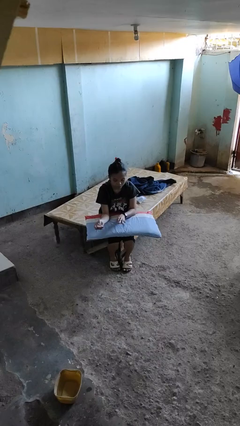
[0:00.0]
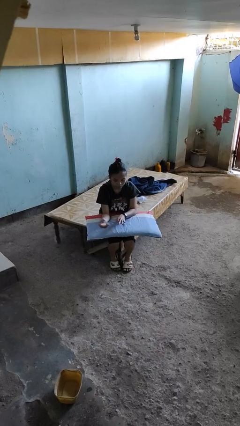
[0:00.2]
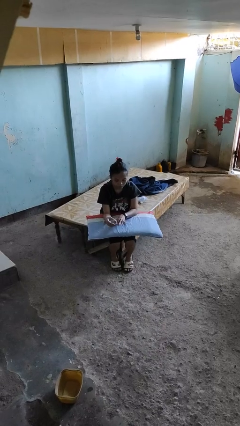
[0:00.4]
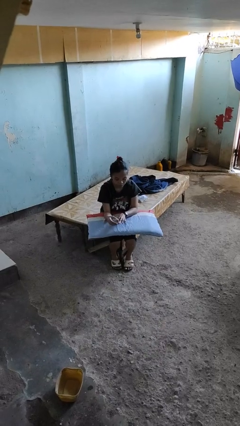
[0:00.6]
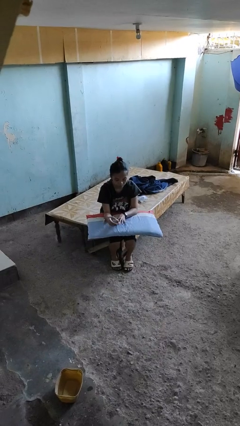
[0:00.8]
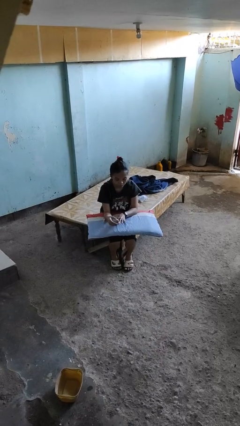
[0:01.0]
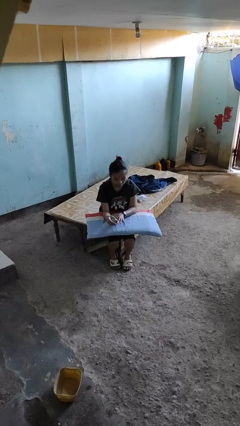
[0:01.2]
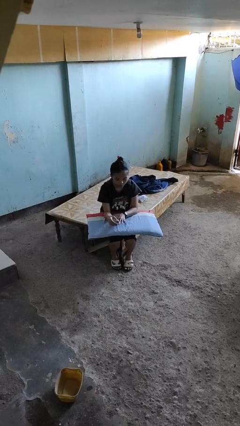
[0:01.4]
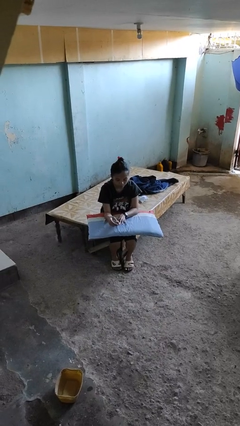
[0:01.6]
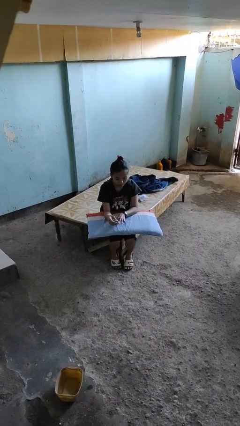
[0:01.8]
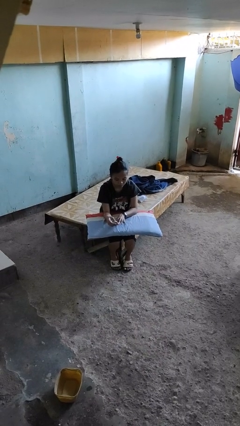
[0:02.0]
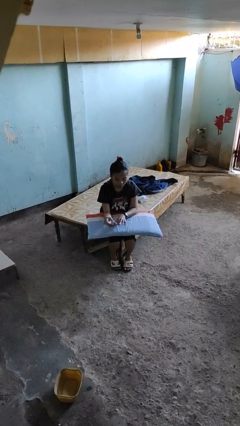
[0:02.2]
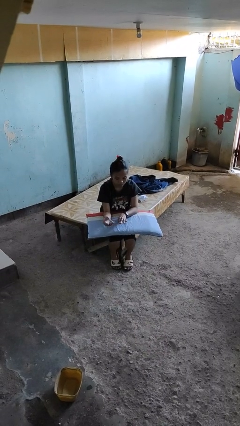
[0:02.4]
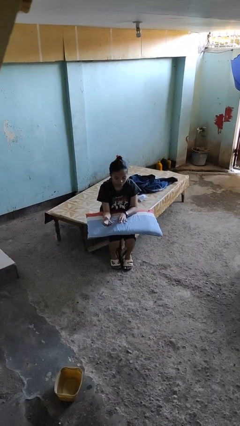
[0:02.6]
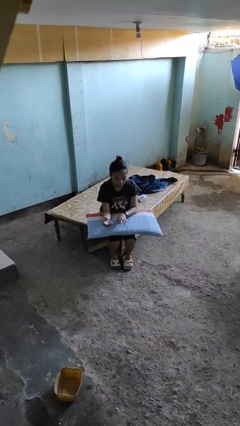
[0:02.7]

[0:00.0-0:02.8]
person clips fingernails

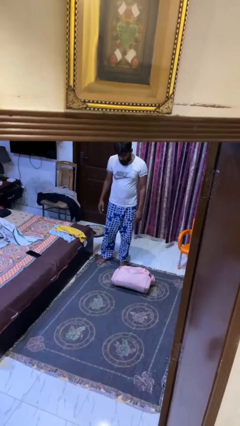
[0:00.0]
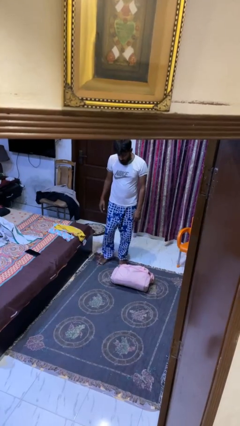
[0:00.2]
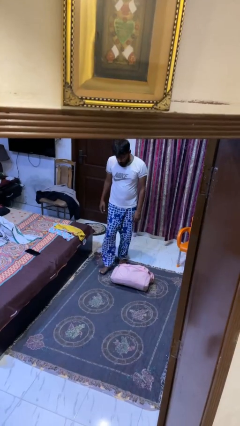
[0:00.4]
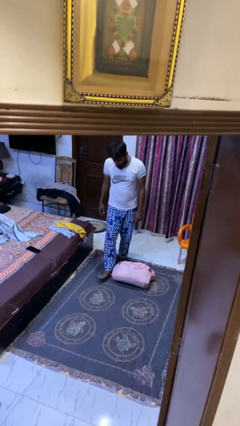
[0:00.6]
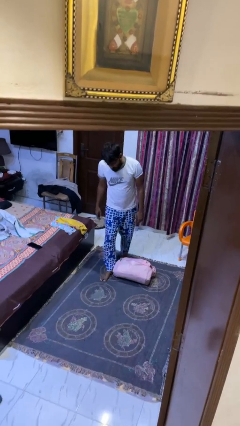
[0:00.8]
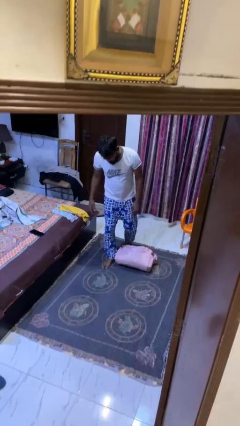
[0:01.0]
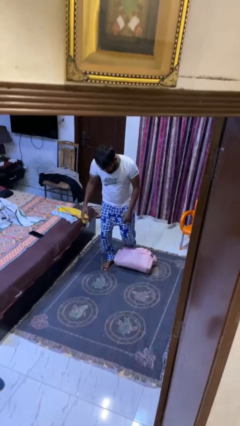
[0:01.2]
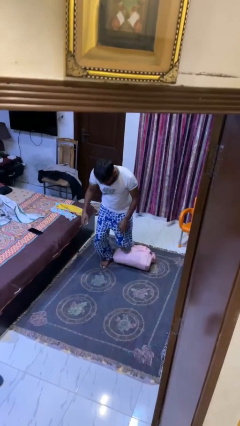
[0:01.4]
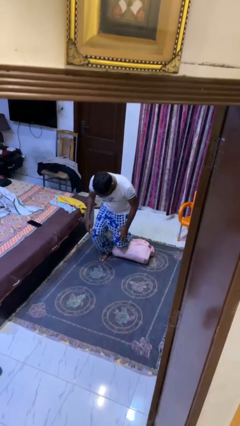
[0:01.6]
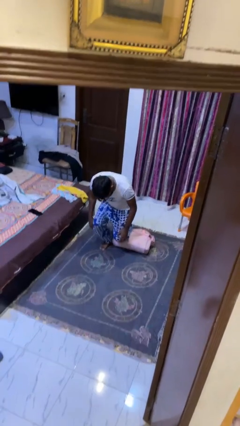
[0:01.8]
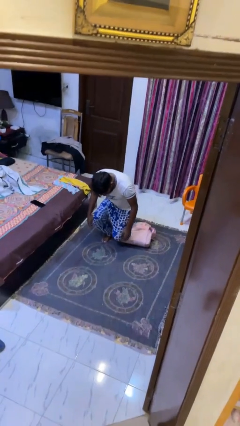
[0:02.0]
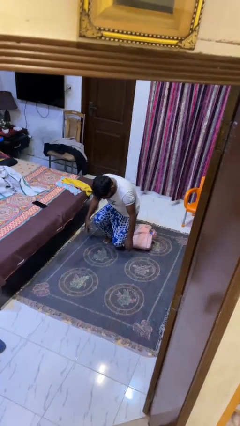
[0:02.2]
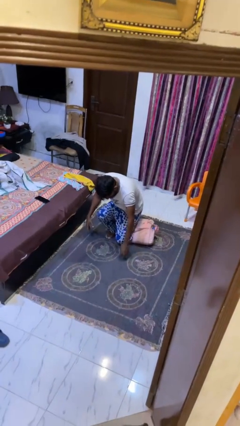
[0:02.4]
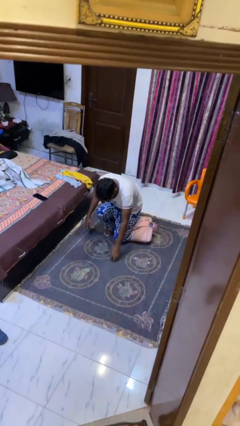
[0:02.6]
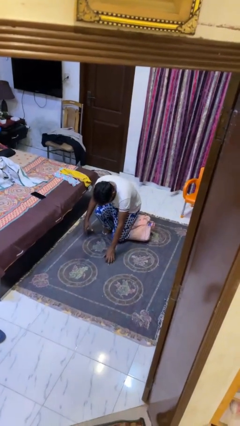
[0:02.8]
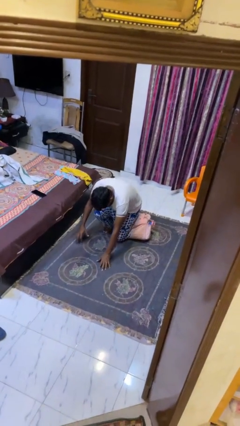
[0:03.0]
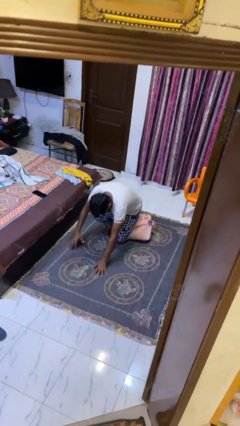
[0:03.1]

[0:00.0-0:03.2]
person trips on object on floor

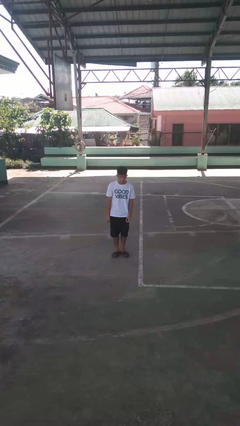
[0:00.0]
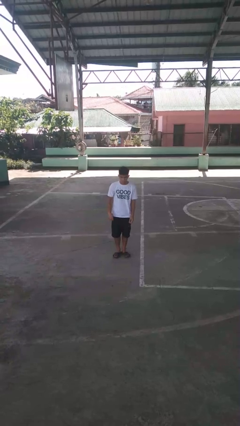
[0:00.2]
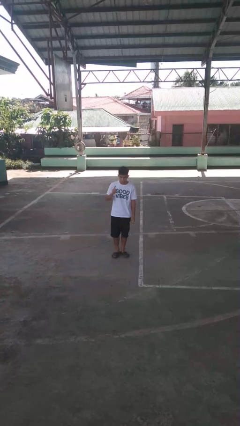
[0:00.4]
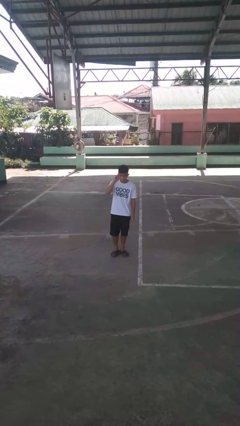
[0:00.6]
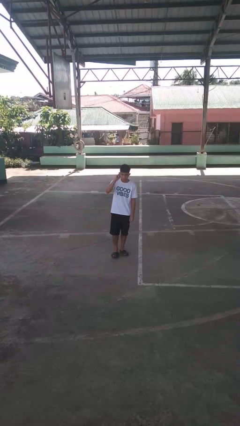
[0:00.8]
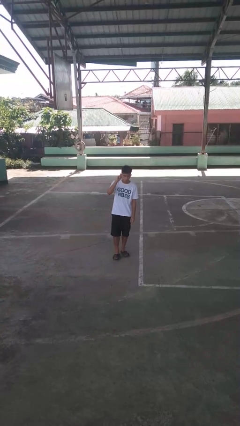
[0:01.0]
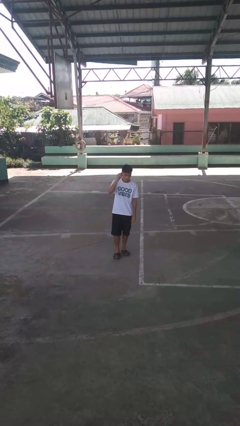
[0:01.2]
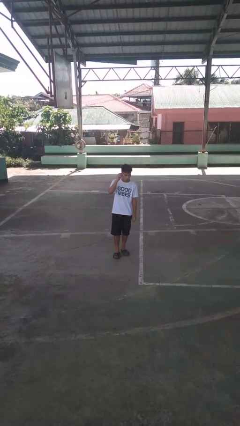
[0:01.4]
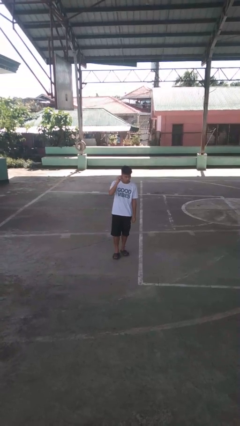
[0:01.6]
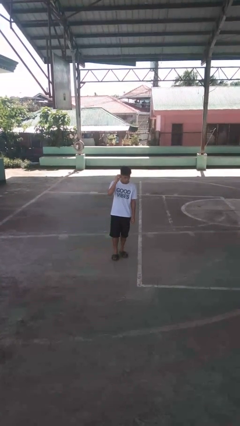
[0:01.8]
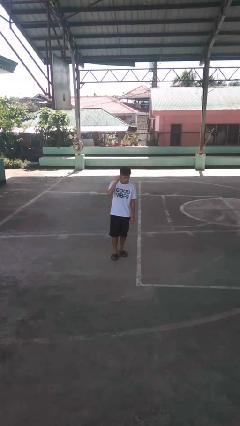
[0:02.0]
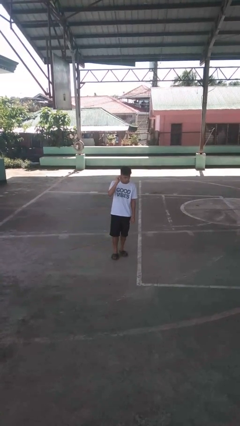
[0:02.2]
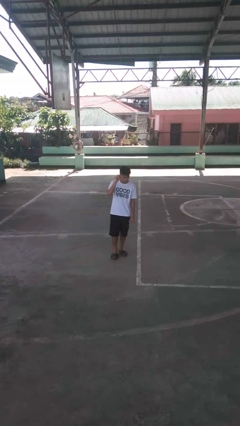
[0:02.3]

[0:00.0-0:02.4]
person touches earlobe

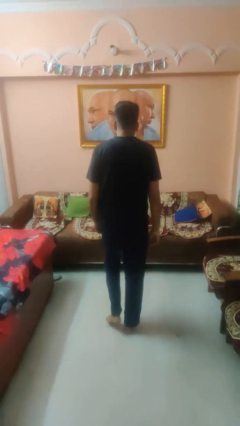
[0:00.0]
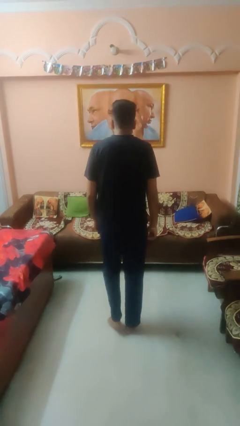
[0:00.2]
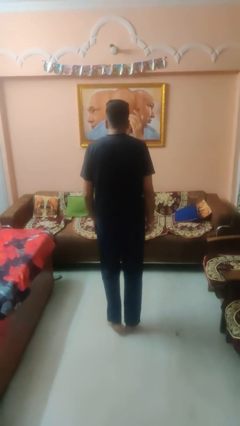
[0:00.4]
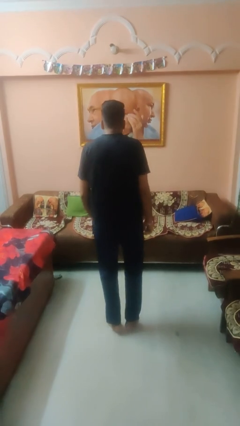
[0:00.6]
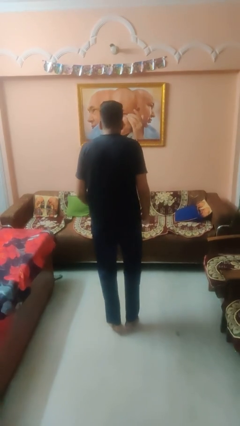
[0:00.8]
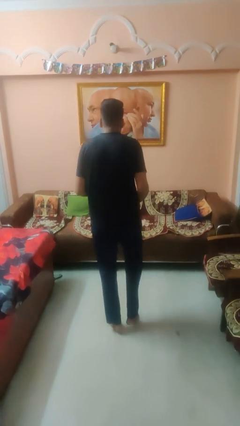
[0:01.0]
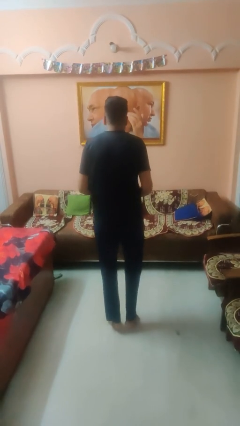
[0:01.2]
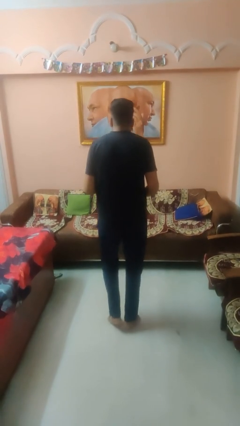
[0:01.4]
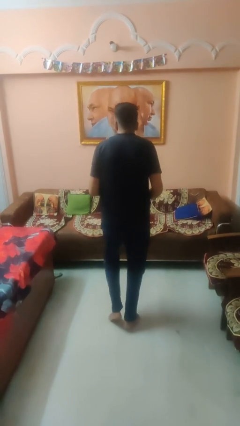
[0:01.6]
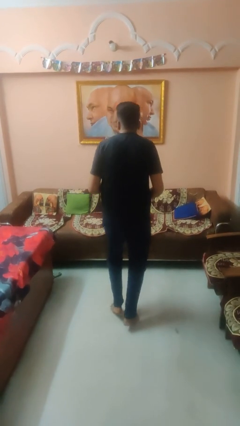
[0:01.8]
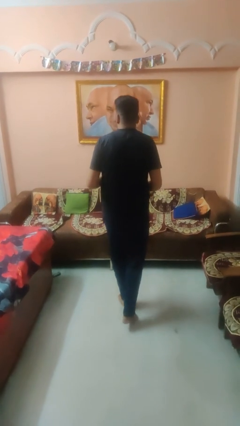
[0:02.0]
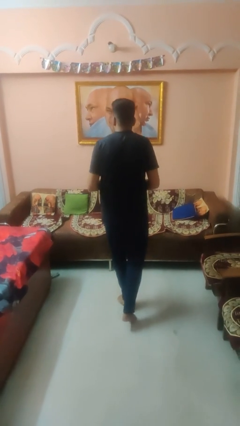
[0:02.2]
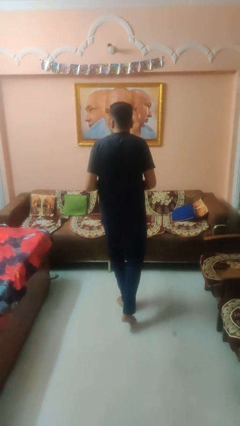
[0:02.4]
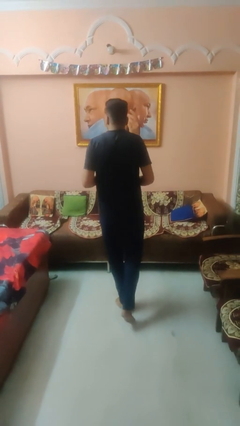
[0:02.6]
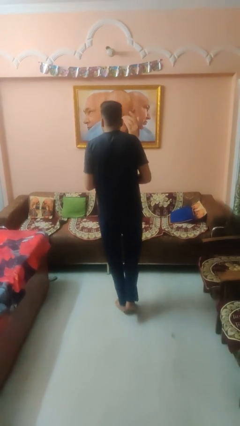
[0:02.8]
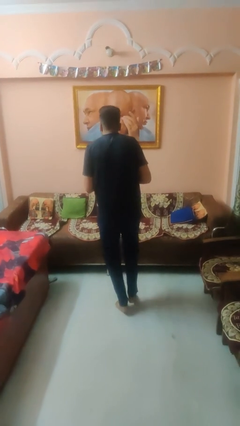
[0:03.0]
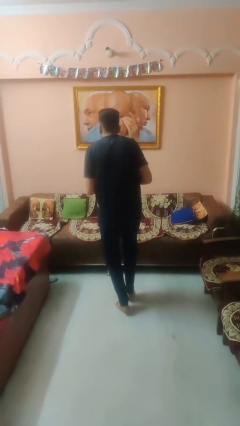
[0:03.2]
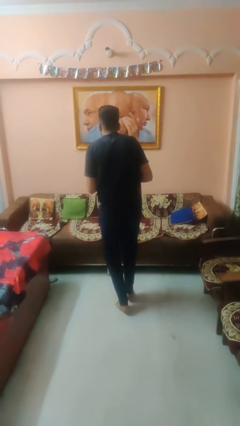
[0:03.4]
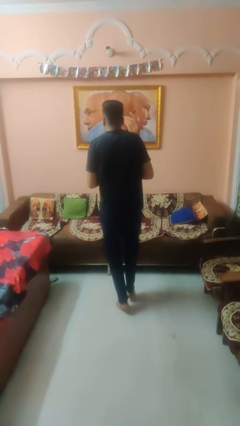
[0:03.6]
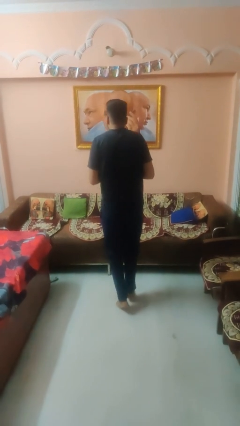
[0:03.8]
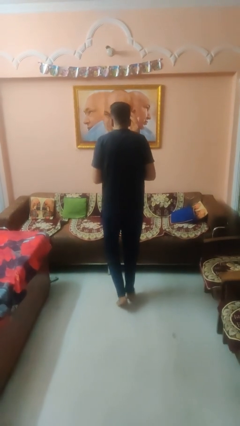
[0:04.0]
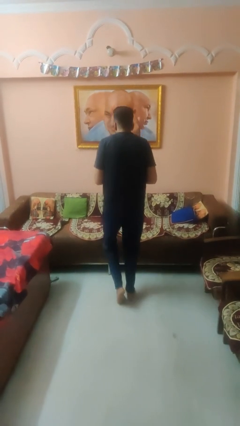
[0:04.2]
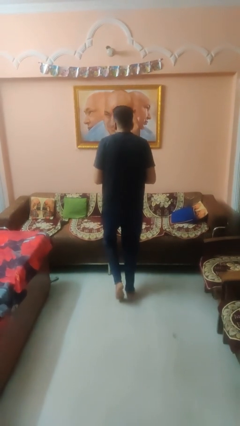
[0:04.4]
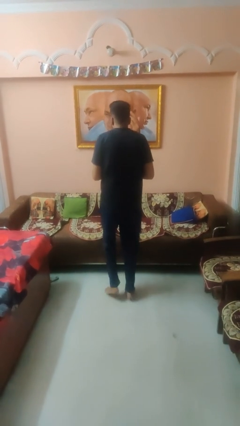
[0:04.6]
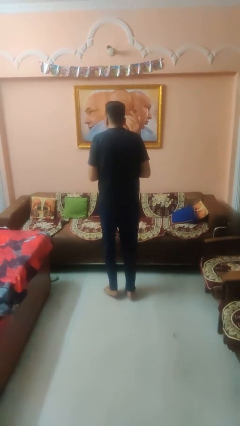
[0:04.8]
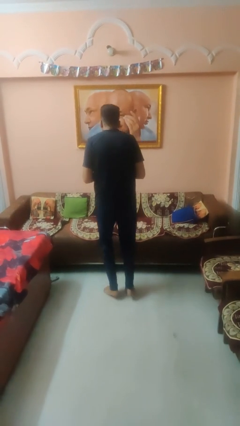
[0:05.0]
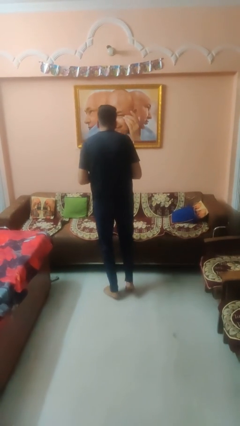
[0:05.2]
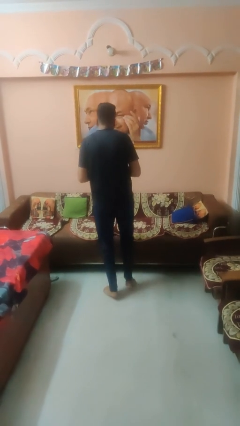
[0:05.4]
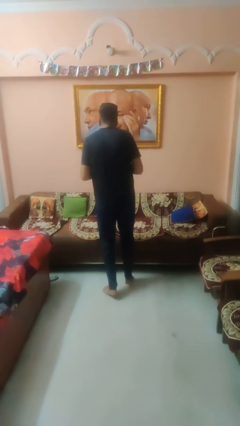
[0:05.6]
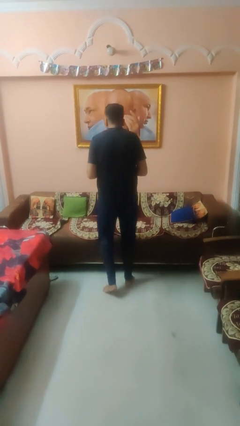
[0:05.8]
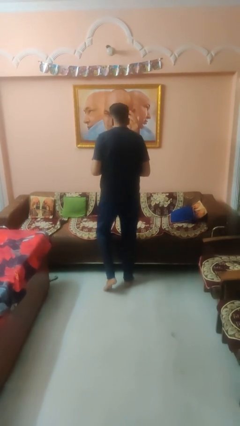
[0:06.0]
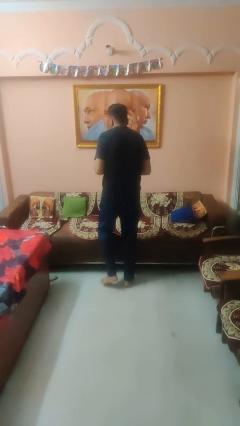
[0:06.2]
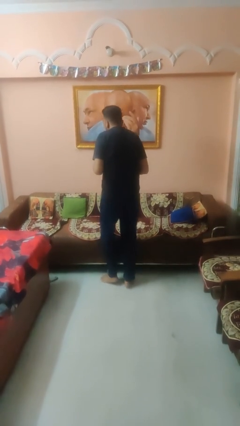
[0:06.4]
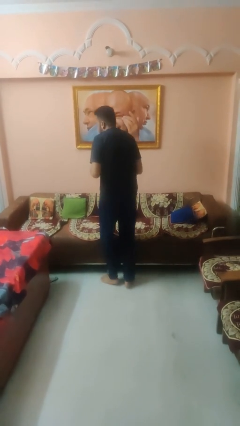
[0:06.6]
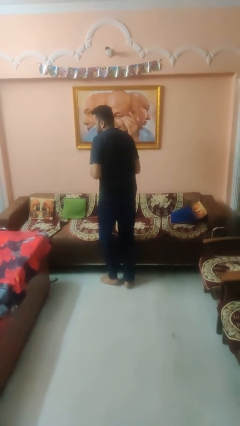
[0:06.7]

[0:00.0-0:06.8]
person walks tiptoe

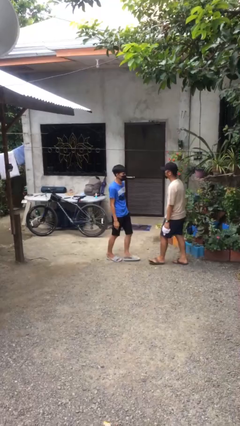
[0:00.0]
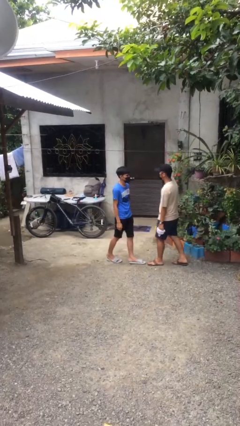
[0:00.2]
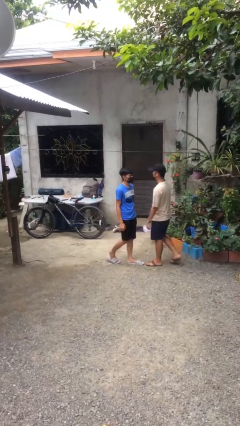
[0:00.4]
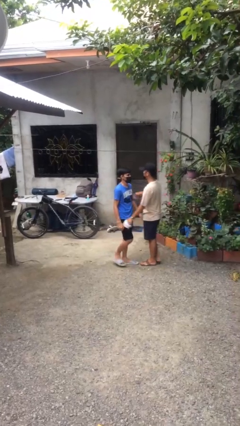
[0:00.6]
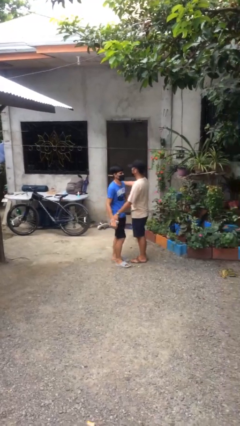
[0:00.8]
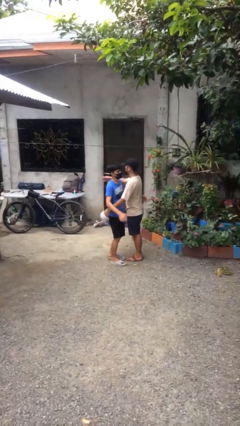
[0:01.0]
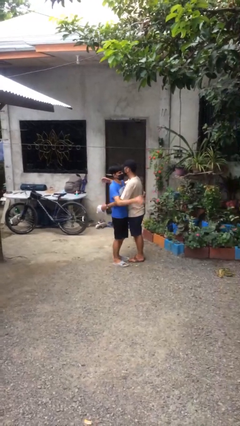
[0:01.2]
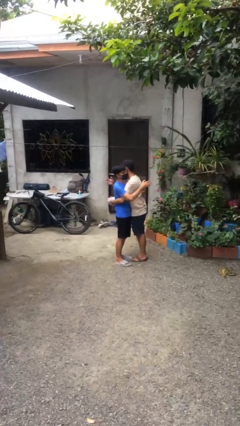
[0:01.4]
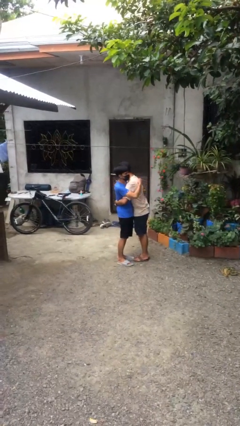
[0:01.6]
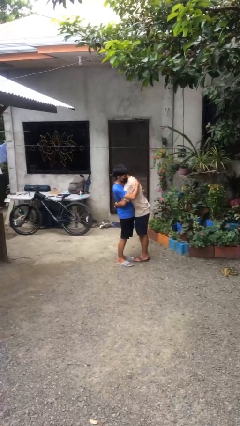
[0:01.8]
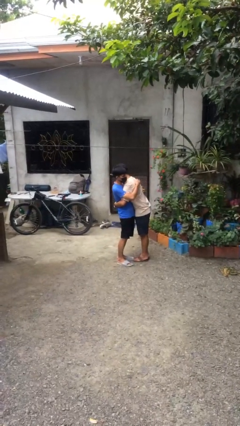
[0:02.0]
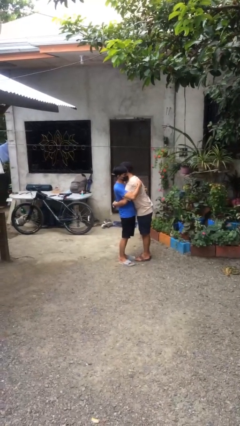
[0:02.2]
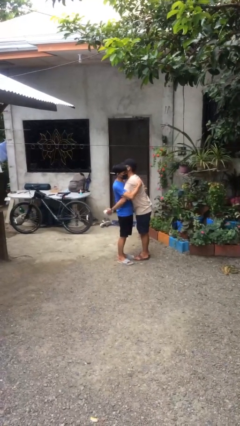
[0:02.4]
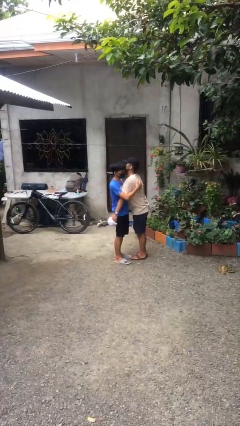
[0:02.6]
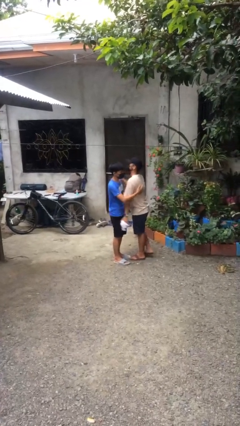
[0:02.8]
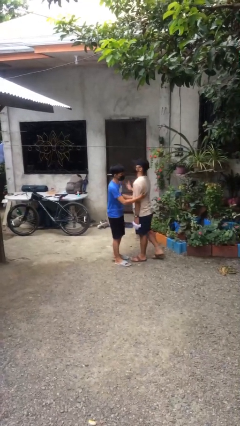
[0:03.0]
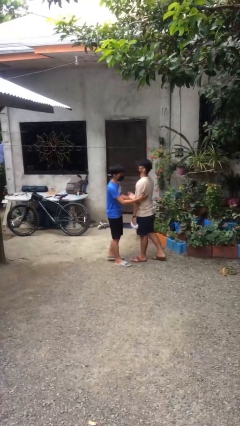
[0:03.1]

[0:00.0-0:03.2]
person embraces person
